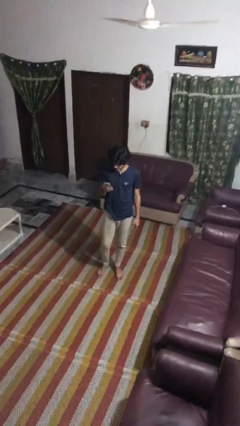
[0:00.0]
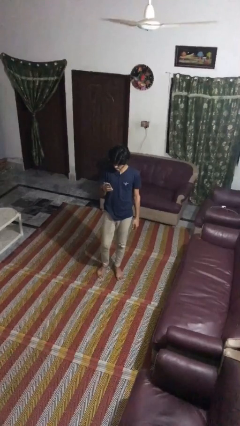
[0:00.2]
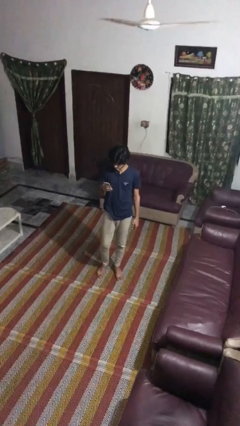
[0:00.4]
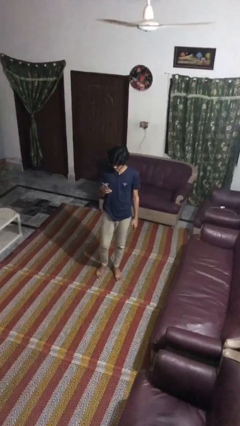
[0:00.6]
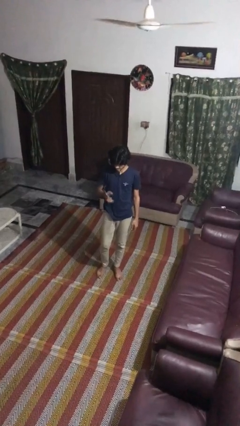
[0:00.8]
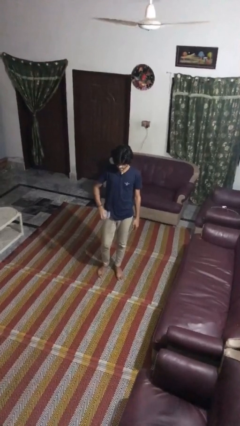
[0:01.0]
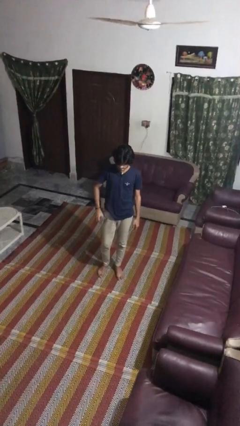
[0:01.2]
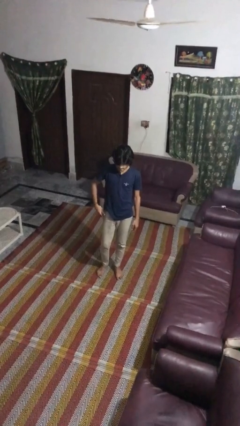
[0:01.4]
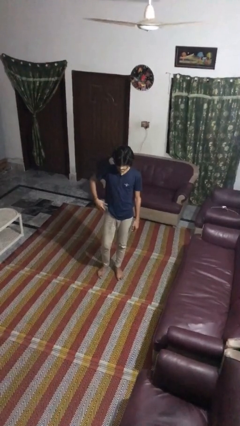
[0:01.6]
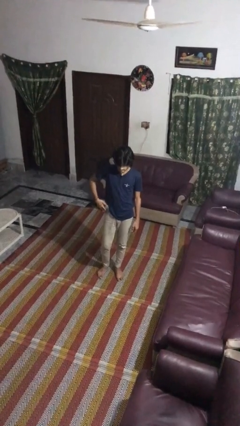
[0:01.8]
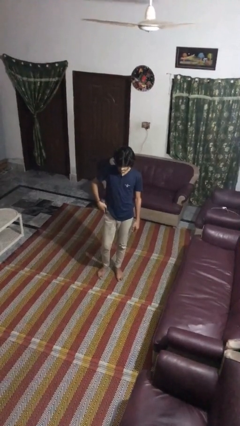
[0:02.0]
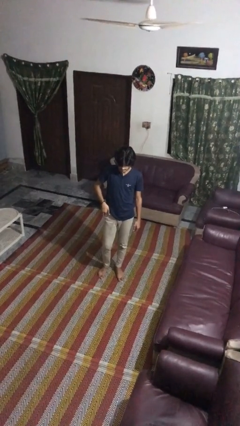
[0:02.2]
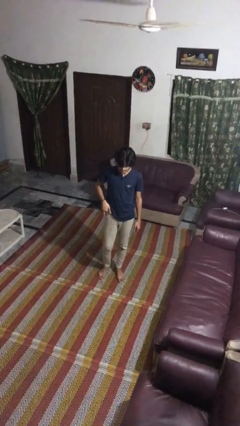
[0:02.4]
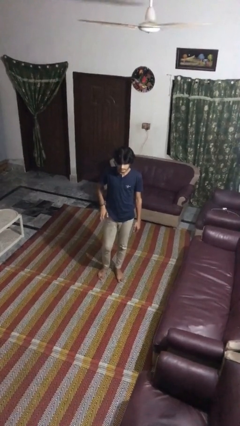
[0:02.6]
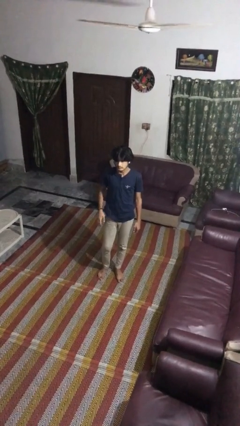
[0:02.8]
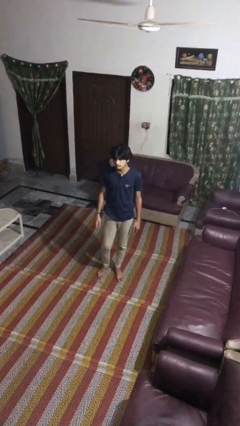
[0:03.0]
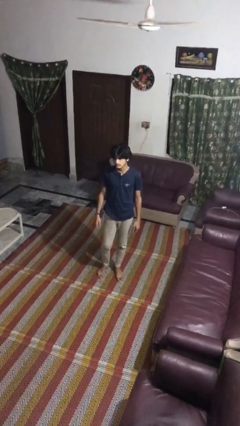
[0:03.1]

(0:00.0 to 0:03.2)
person puts phone into pocket

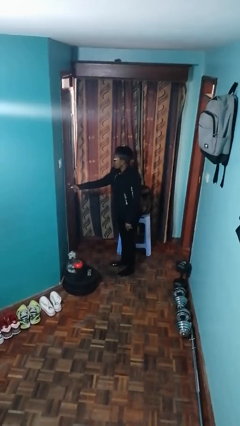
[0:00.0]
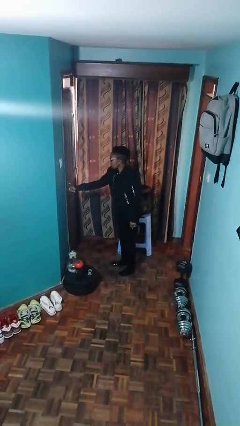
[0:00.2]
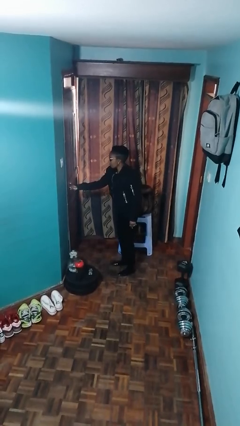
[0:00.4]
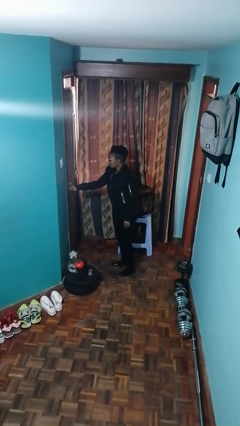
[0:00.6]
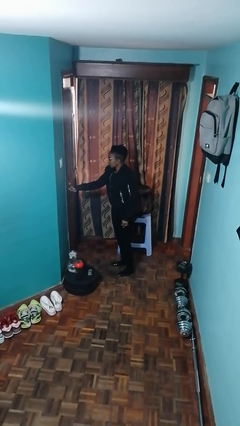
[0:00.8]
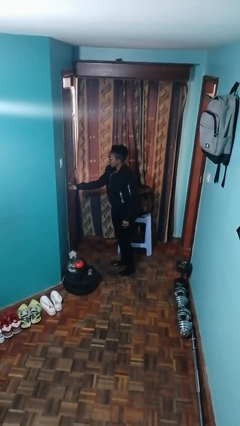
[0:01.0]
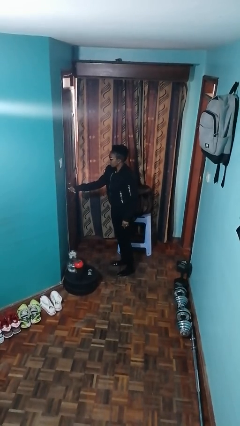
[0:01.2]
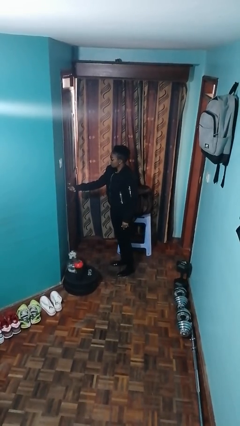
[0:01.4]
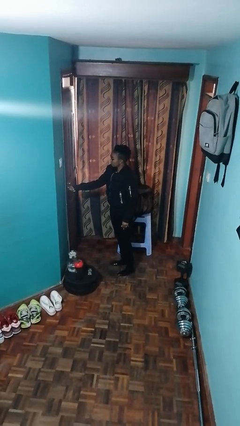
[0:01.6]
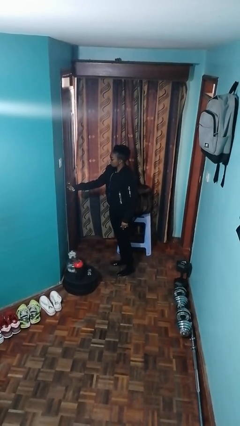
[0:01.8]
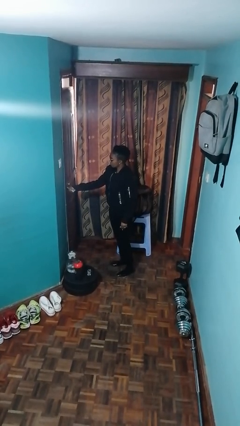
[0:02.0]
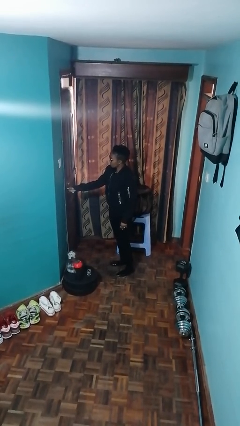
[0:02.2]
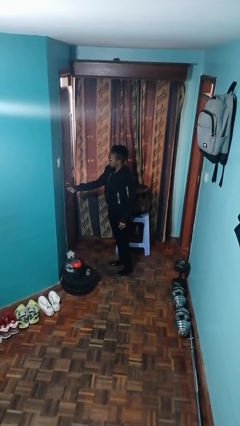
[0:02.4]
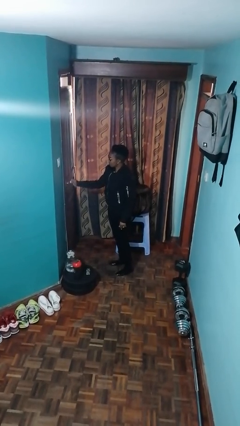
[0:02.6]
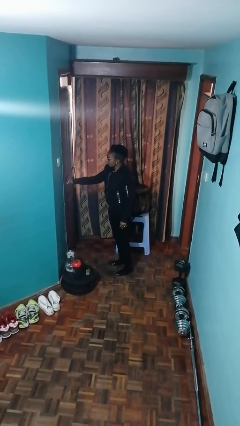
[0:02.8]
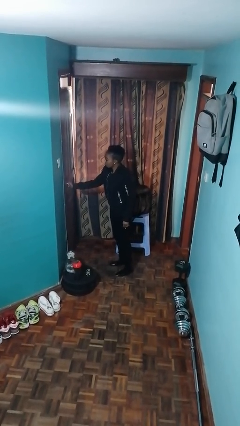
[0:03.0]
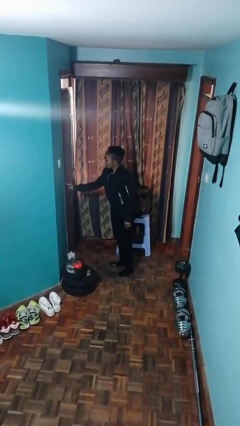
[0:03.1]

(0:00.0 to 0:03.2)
person unlocks door with keys

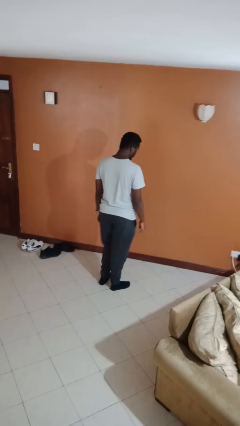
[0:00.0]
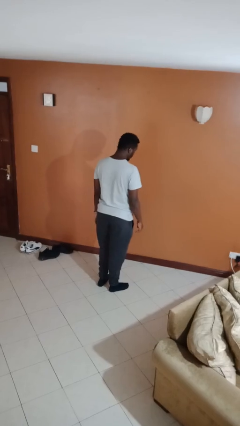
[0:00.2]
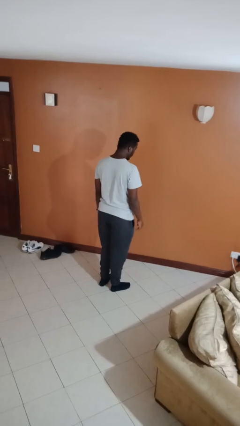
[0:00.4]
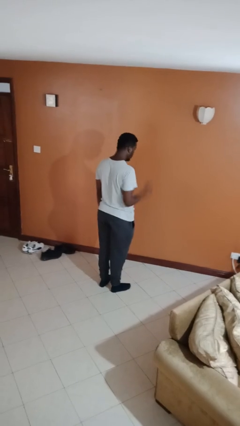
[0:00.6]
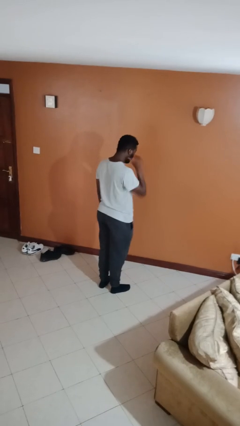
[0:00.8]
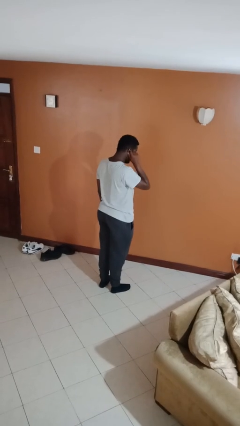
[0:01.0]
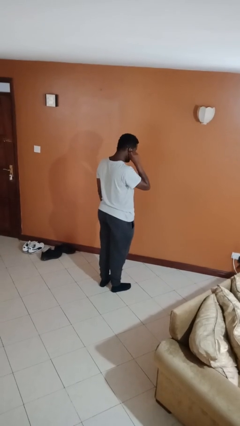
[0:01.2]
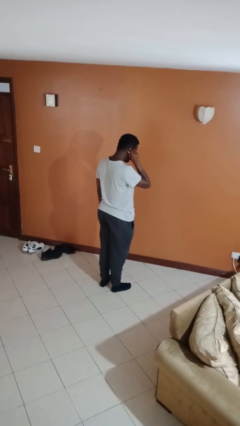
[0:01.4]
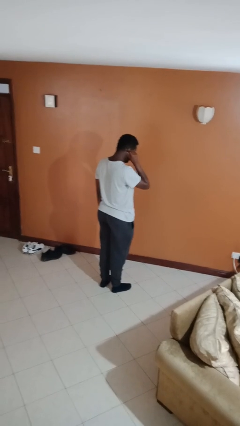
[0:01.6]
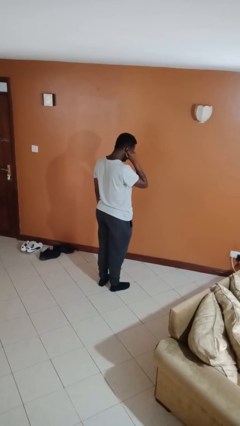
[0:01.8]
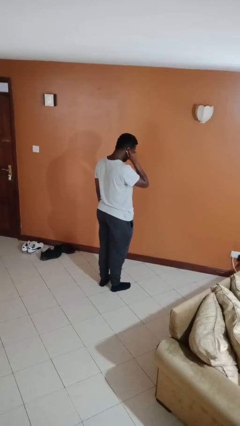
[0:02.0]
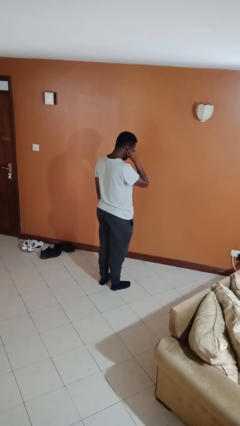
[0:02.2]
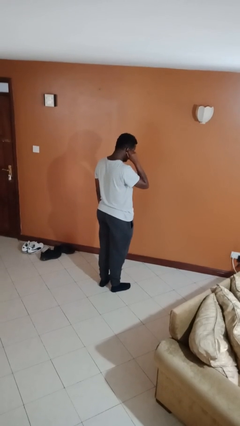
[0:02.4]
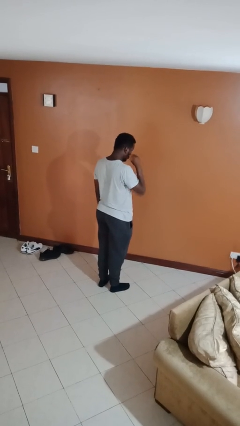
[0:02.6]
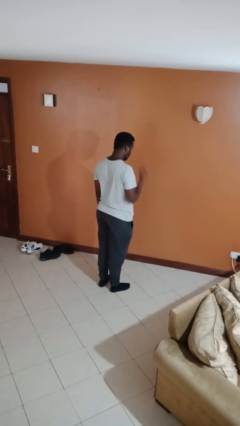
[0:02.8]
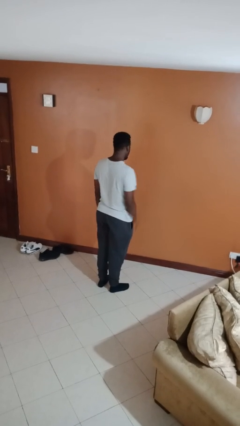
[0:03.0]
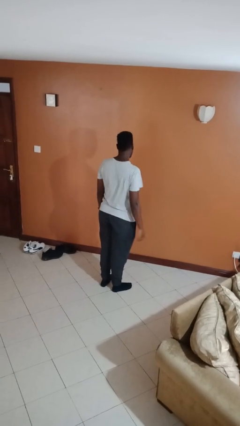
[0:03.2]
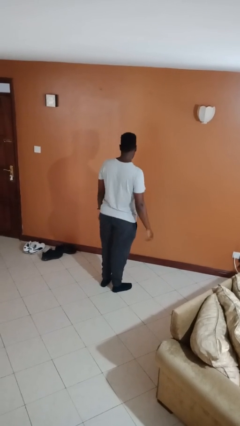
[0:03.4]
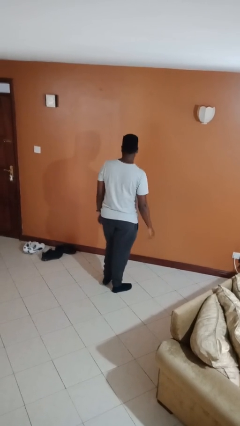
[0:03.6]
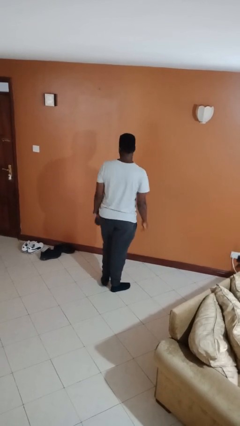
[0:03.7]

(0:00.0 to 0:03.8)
person touches earlobe

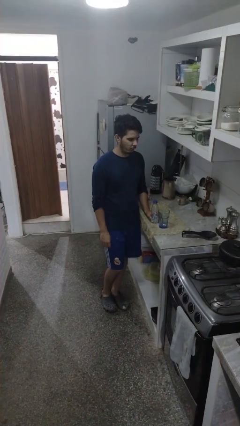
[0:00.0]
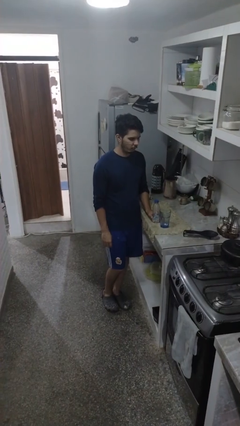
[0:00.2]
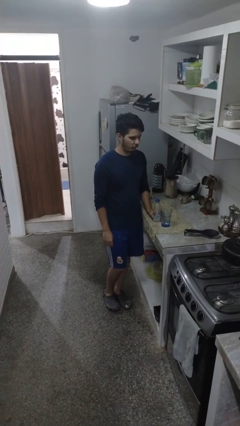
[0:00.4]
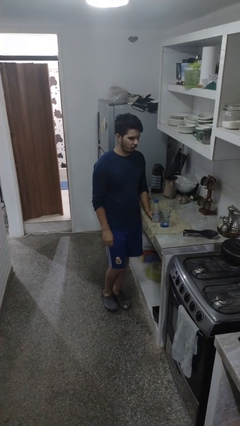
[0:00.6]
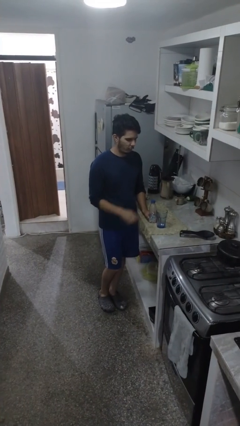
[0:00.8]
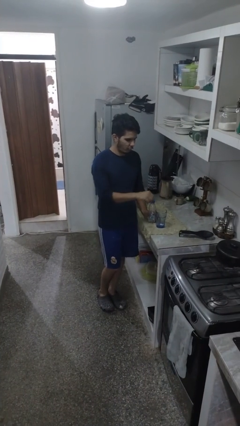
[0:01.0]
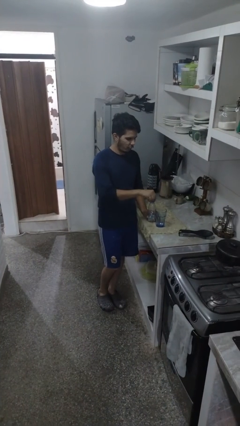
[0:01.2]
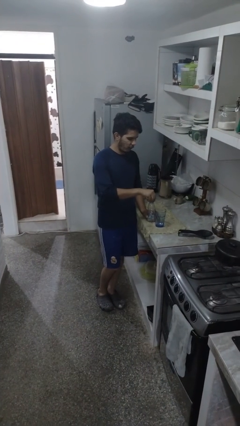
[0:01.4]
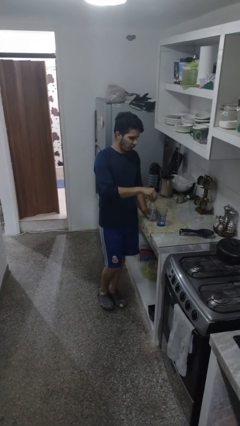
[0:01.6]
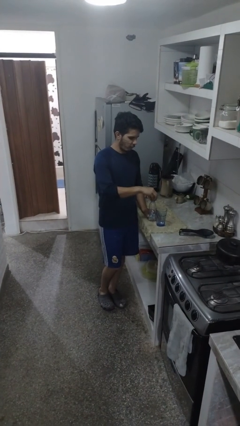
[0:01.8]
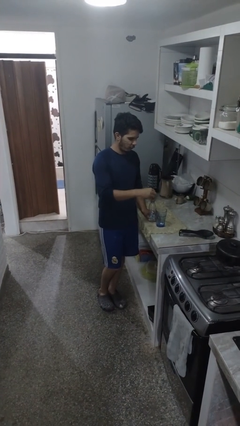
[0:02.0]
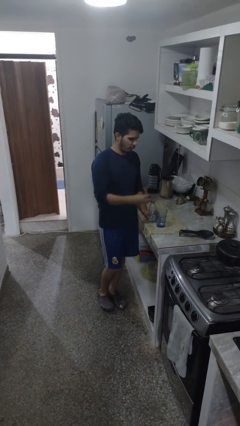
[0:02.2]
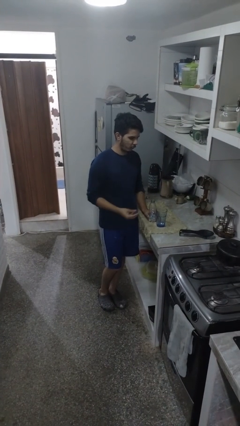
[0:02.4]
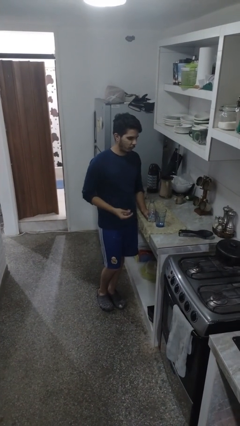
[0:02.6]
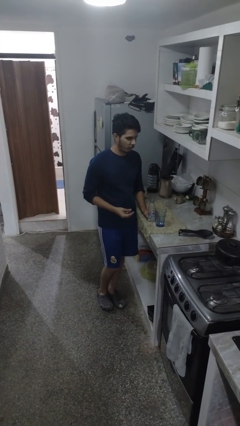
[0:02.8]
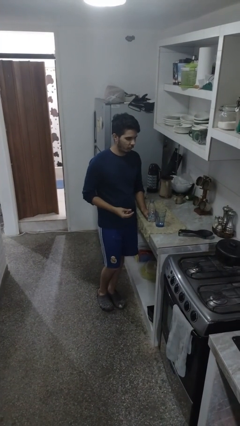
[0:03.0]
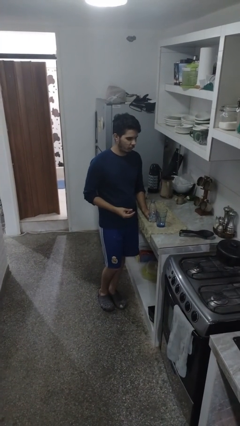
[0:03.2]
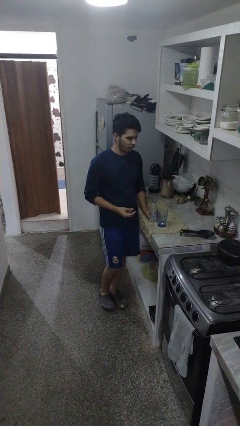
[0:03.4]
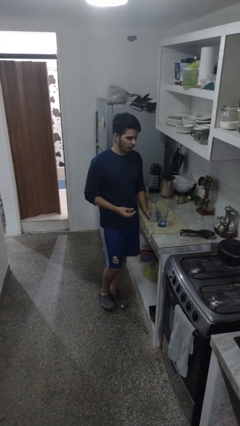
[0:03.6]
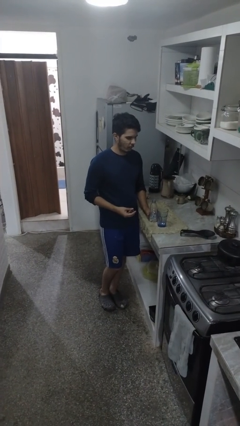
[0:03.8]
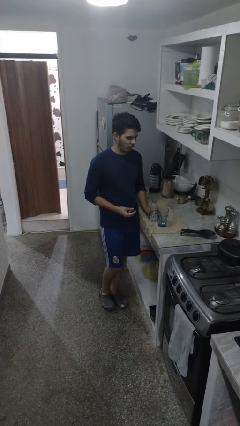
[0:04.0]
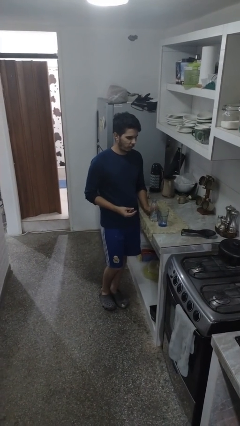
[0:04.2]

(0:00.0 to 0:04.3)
person unscrews lid from bottle

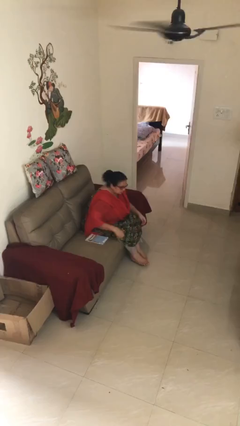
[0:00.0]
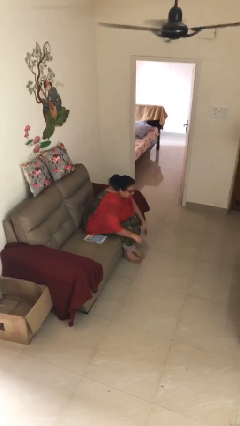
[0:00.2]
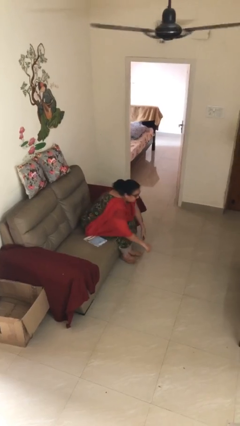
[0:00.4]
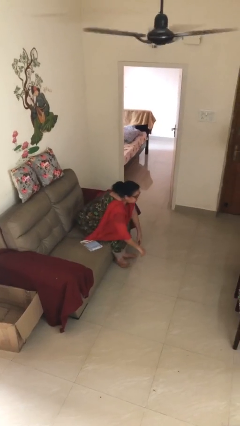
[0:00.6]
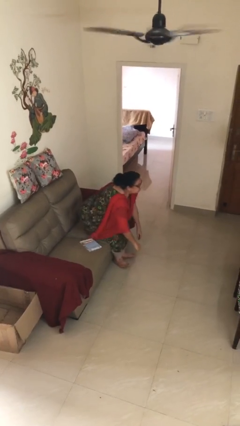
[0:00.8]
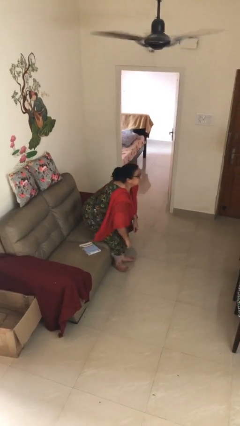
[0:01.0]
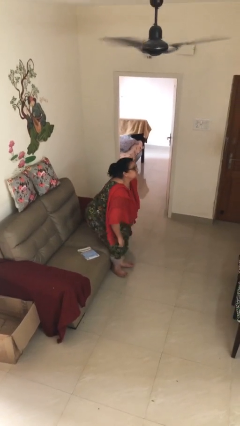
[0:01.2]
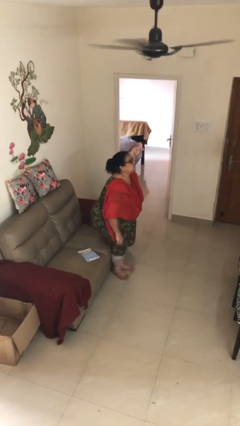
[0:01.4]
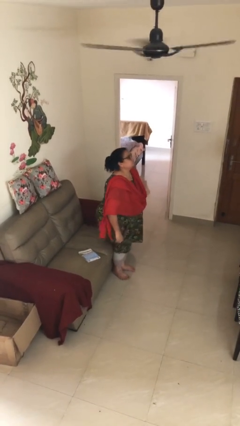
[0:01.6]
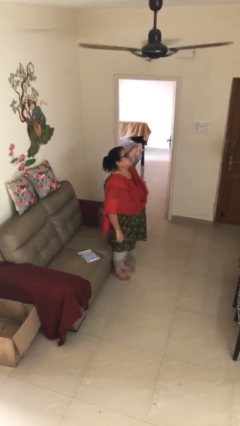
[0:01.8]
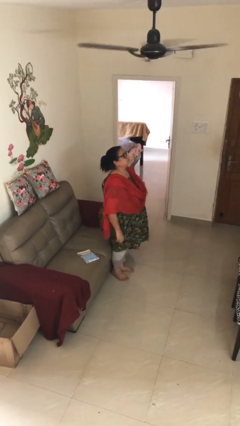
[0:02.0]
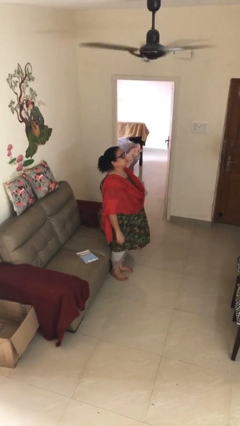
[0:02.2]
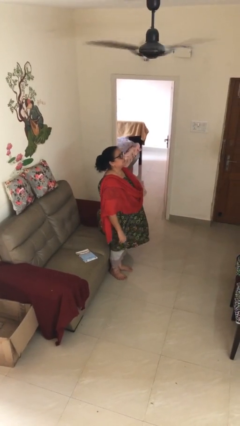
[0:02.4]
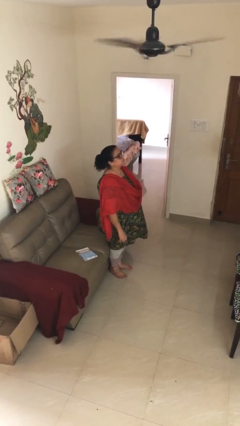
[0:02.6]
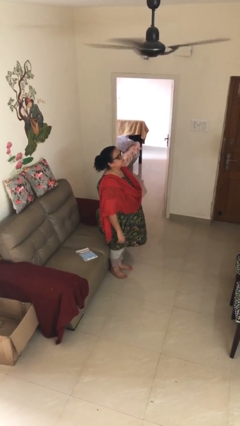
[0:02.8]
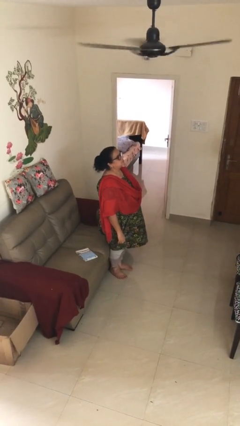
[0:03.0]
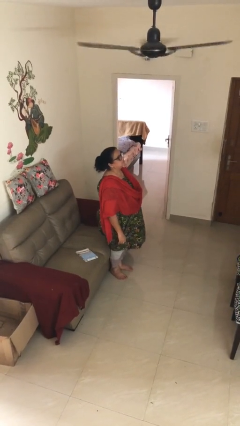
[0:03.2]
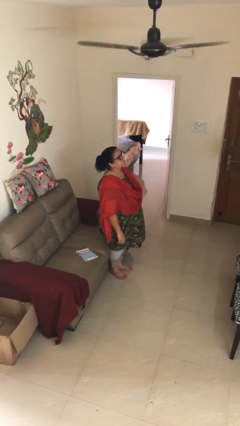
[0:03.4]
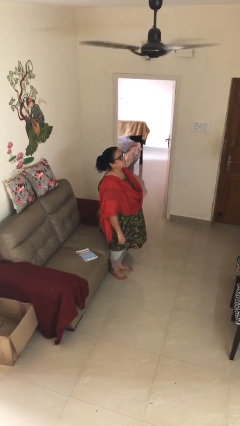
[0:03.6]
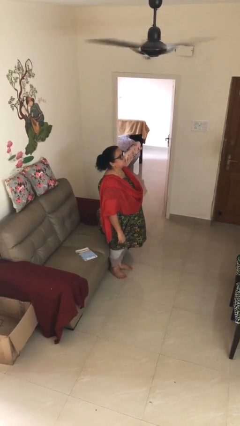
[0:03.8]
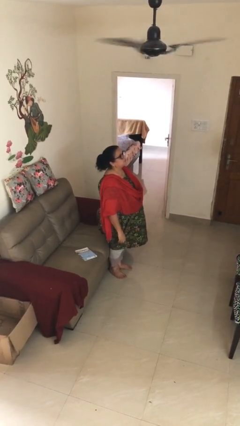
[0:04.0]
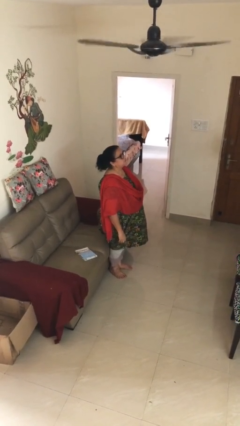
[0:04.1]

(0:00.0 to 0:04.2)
person stands up
